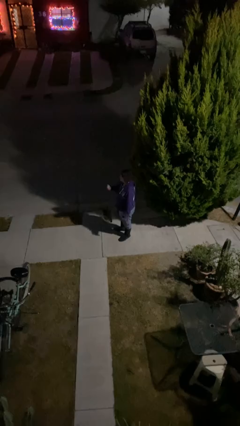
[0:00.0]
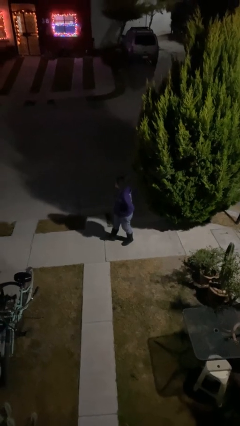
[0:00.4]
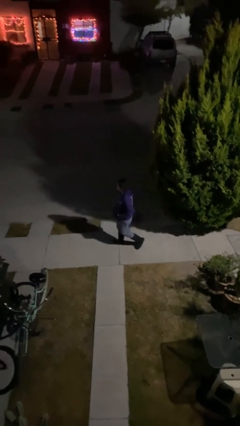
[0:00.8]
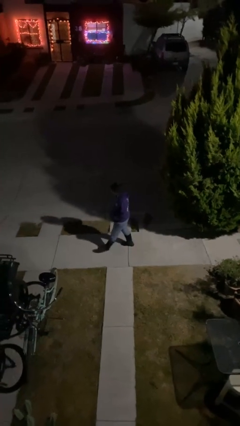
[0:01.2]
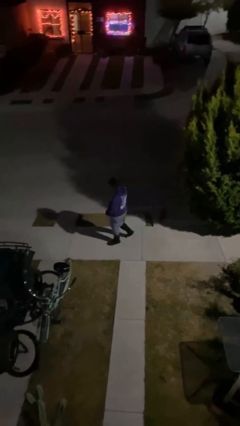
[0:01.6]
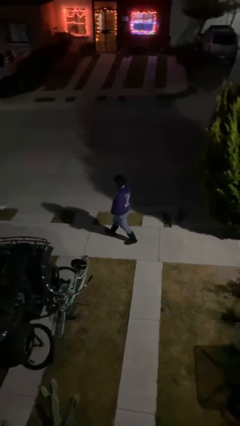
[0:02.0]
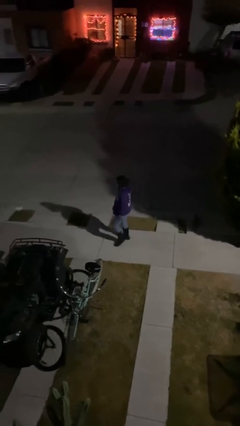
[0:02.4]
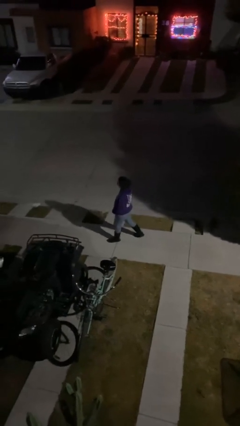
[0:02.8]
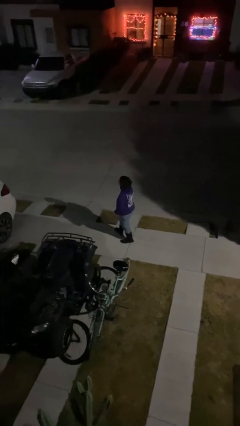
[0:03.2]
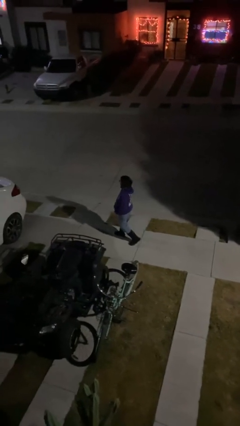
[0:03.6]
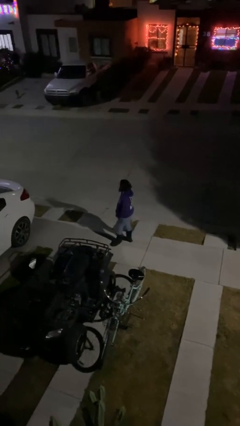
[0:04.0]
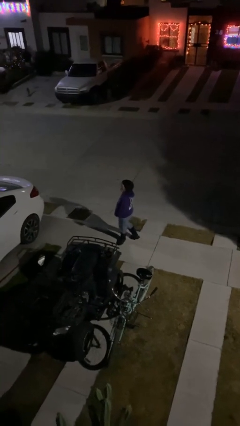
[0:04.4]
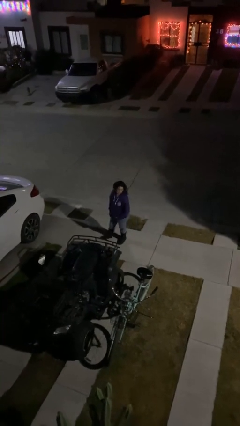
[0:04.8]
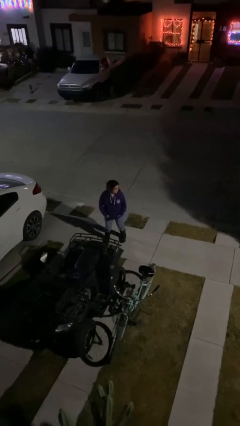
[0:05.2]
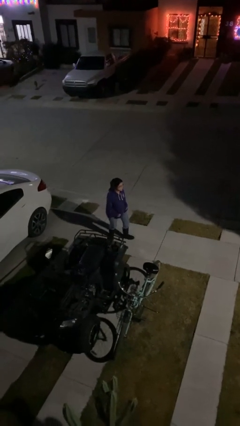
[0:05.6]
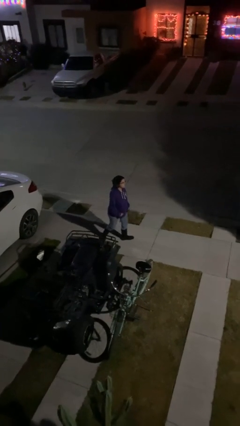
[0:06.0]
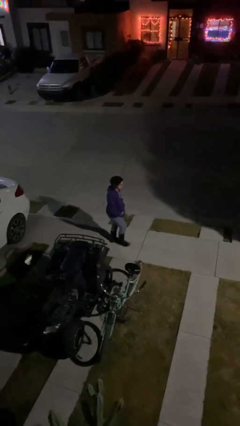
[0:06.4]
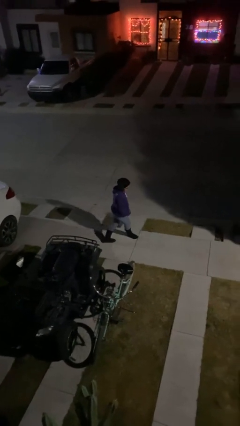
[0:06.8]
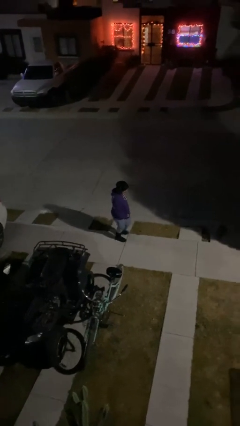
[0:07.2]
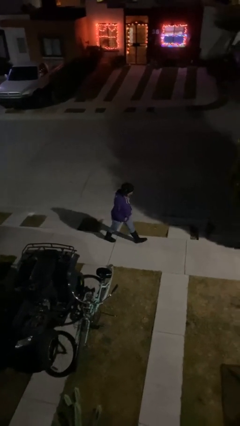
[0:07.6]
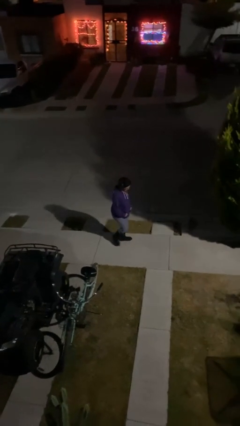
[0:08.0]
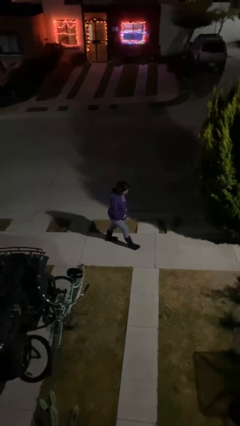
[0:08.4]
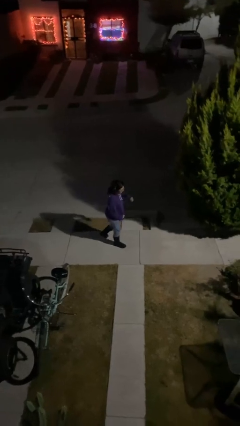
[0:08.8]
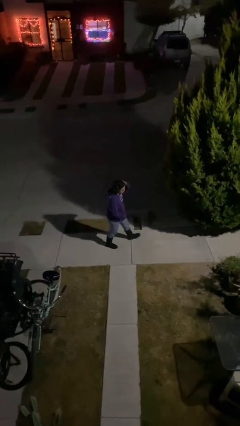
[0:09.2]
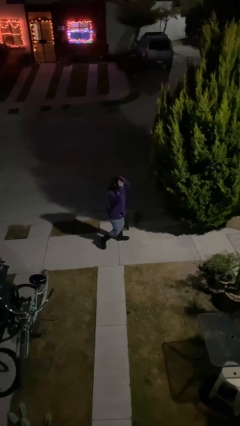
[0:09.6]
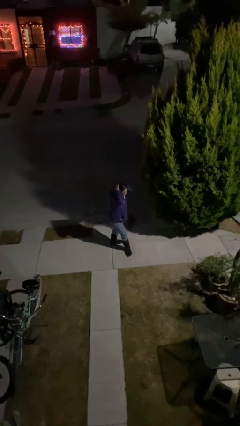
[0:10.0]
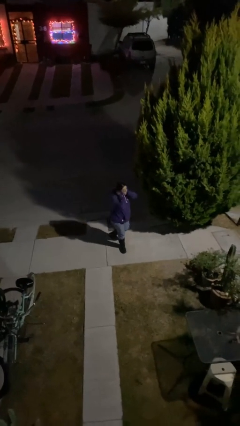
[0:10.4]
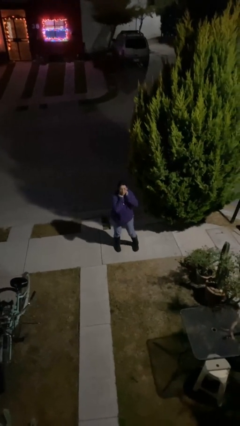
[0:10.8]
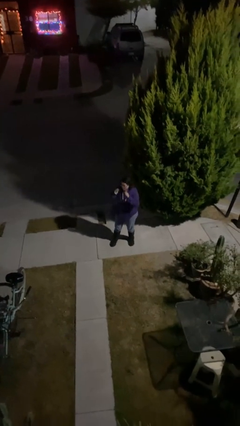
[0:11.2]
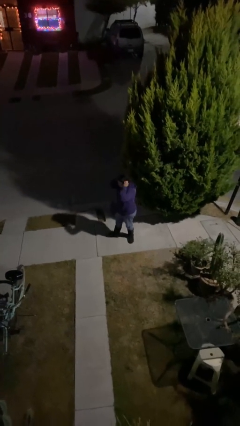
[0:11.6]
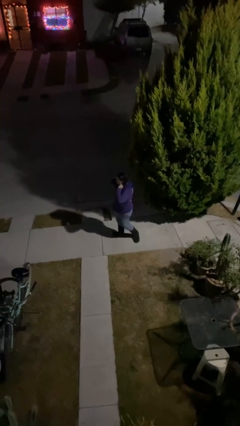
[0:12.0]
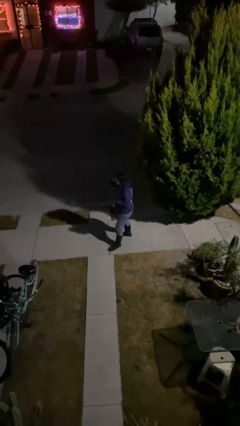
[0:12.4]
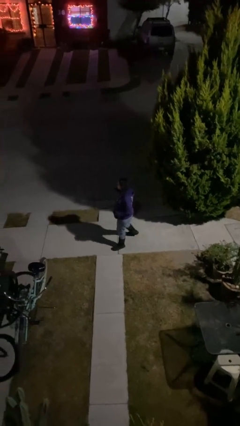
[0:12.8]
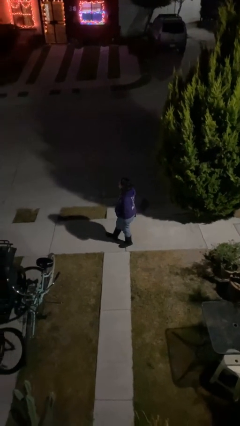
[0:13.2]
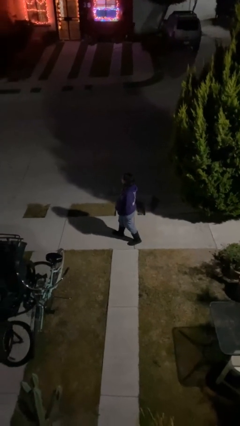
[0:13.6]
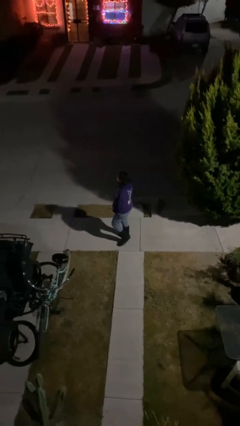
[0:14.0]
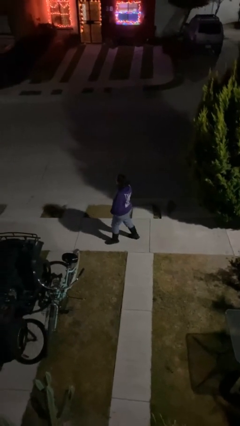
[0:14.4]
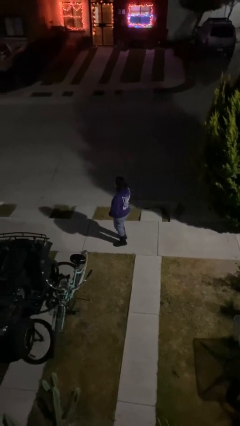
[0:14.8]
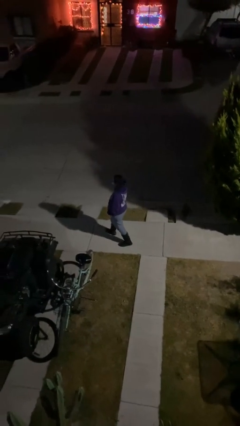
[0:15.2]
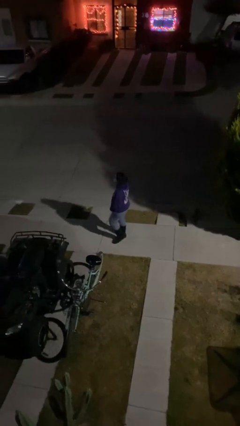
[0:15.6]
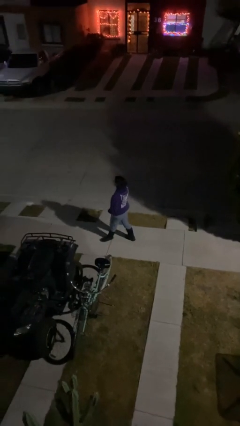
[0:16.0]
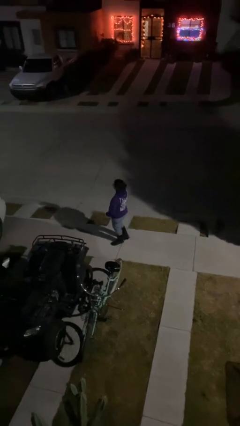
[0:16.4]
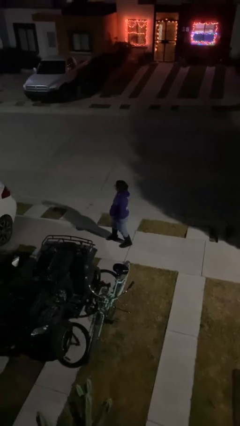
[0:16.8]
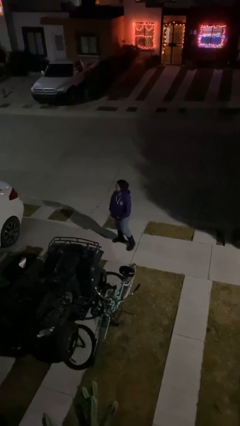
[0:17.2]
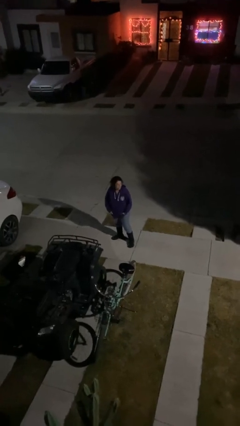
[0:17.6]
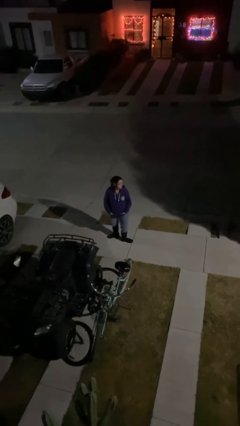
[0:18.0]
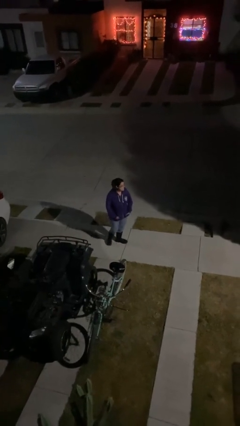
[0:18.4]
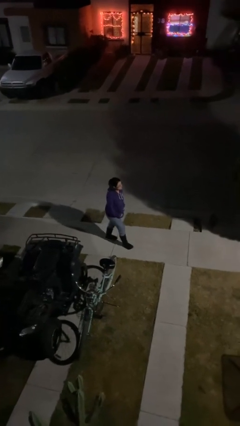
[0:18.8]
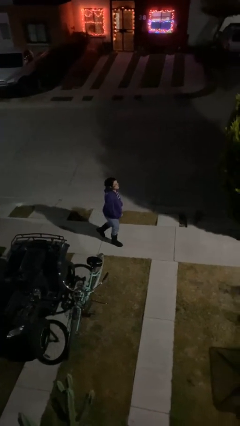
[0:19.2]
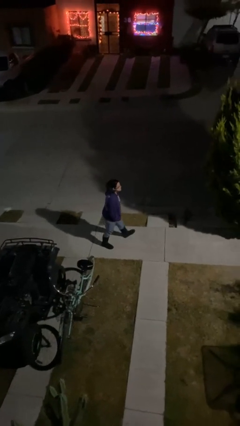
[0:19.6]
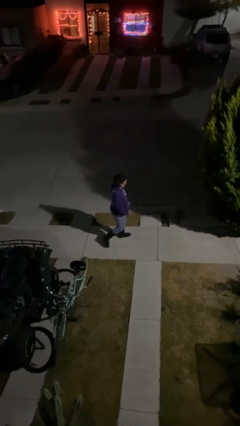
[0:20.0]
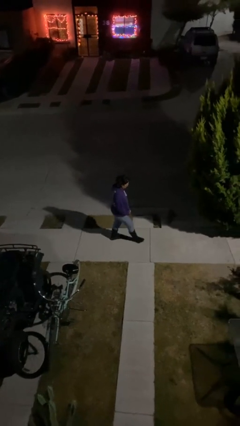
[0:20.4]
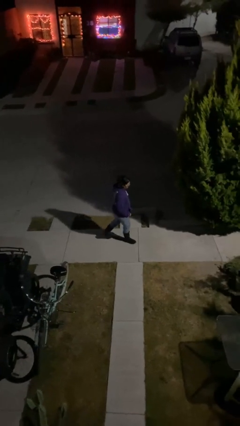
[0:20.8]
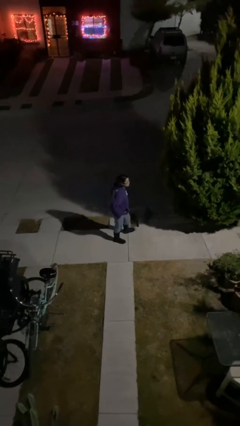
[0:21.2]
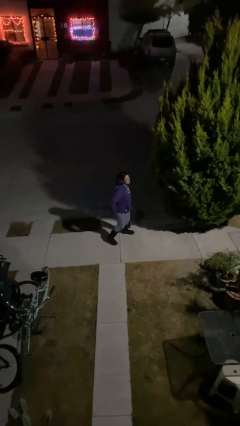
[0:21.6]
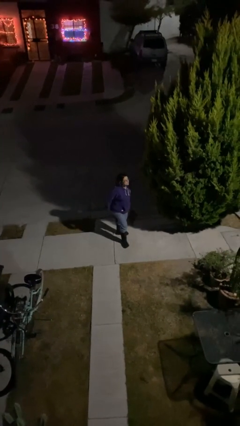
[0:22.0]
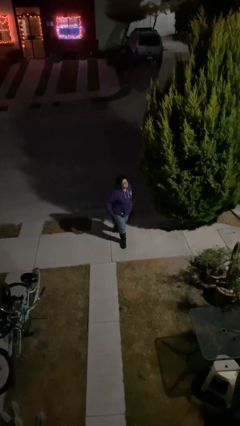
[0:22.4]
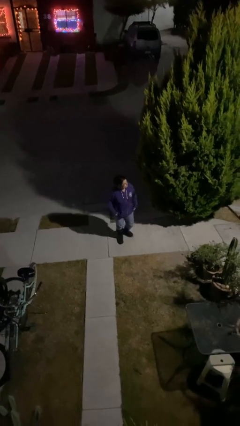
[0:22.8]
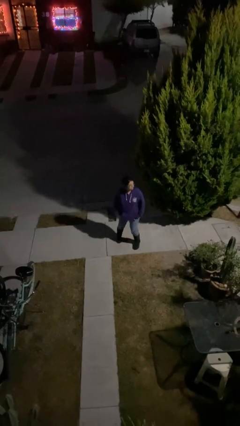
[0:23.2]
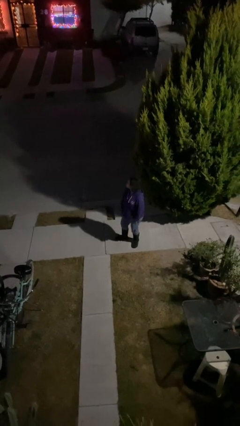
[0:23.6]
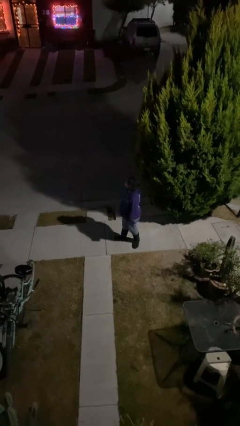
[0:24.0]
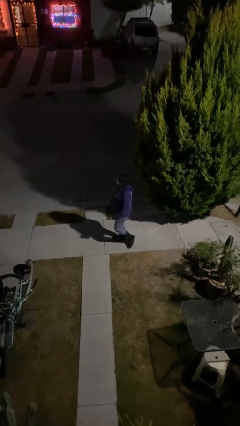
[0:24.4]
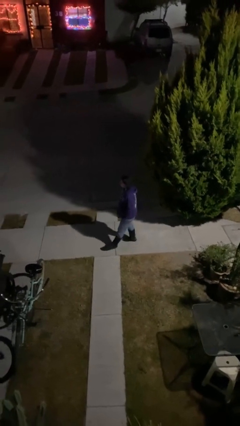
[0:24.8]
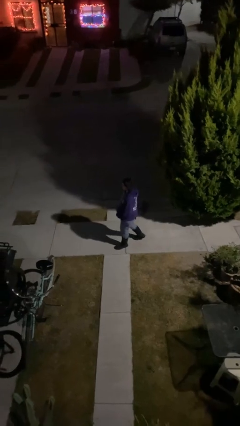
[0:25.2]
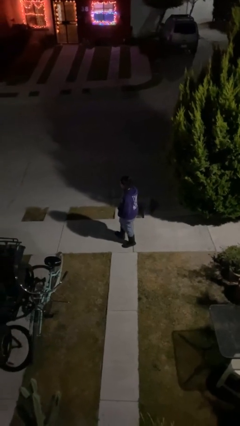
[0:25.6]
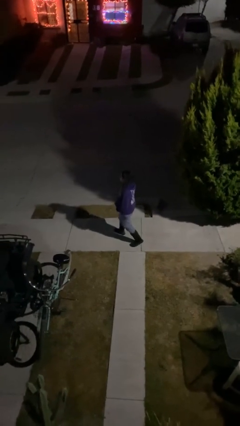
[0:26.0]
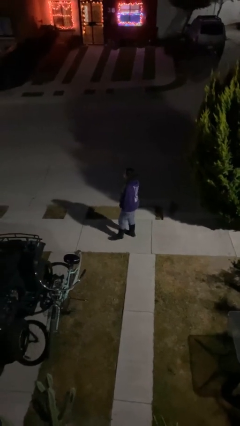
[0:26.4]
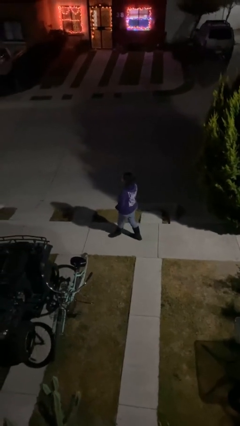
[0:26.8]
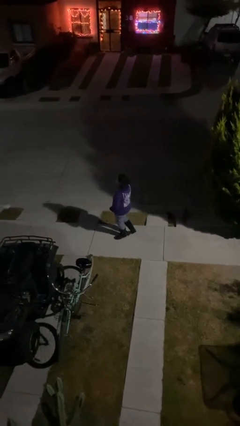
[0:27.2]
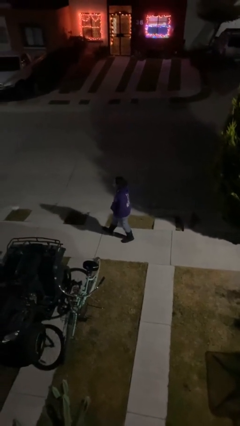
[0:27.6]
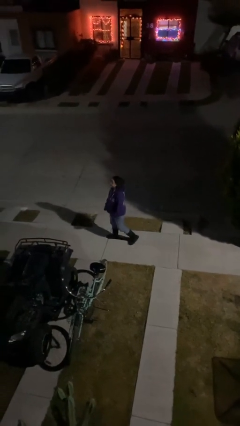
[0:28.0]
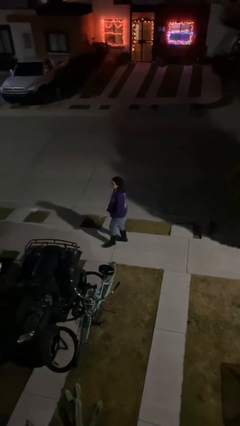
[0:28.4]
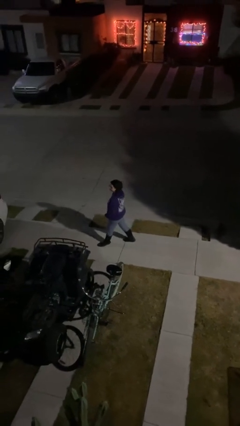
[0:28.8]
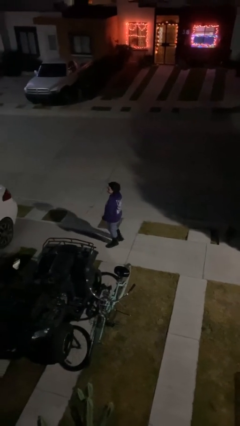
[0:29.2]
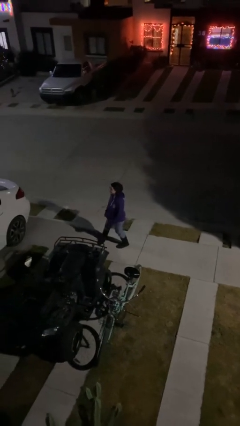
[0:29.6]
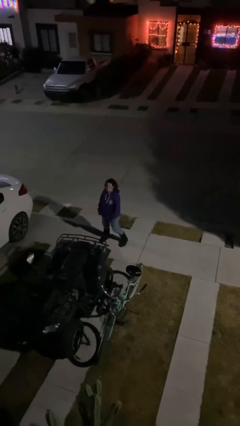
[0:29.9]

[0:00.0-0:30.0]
person walks

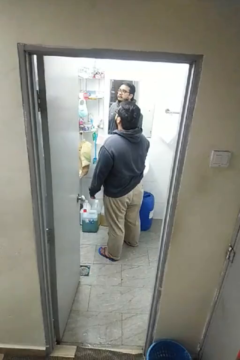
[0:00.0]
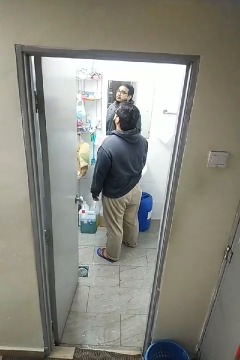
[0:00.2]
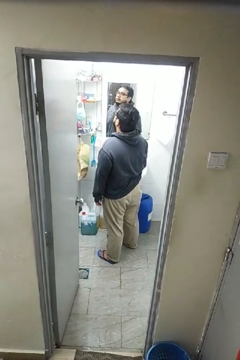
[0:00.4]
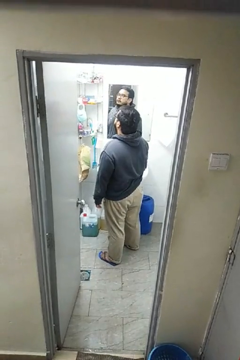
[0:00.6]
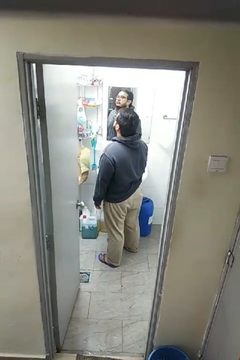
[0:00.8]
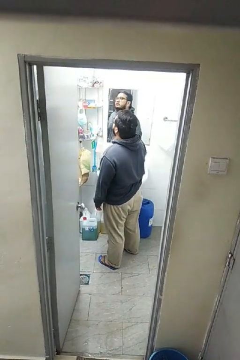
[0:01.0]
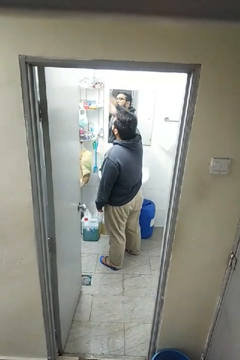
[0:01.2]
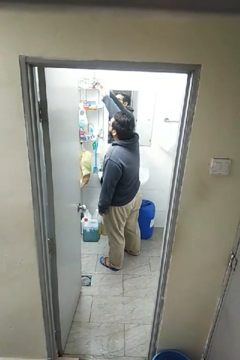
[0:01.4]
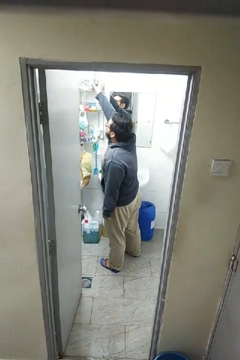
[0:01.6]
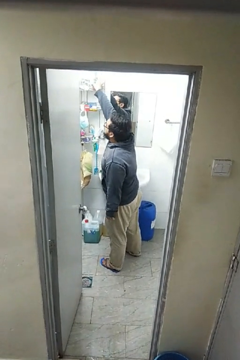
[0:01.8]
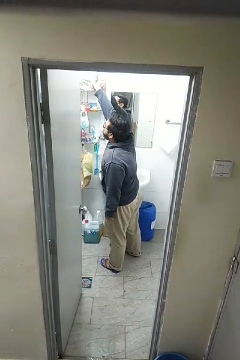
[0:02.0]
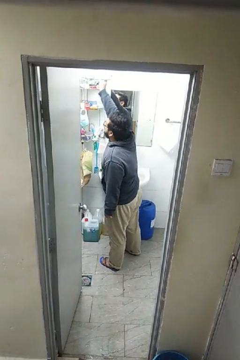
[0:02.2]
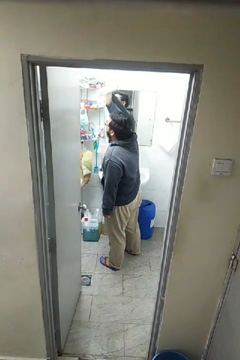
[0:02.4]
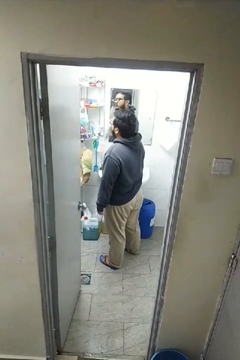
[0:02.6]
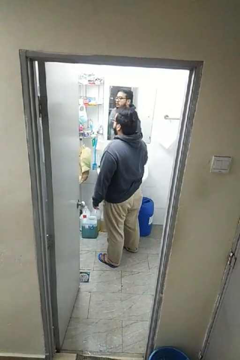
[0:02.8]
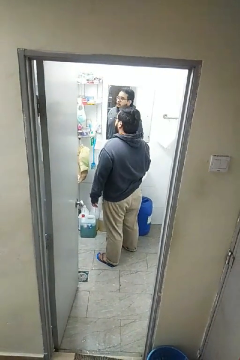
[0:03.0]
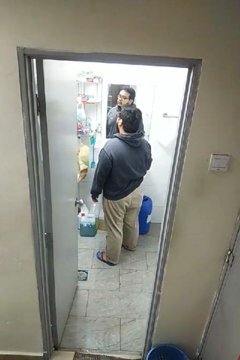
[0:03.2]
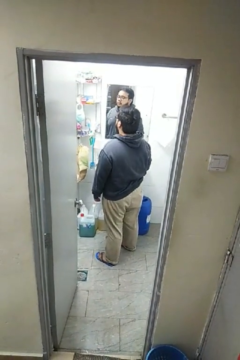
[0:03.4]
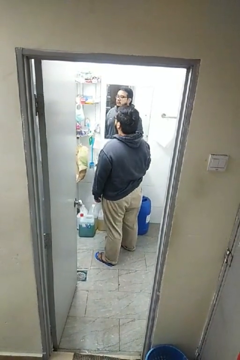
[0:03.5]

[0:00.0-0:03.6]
person picks up object from countertop
